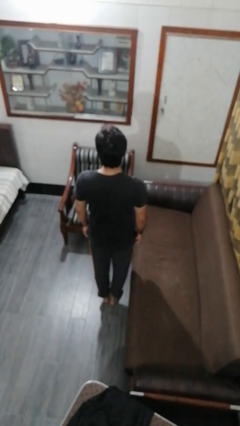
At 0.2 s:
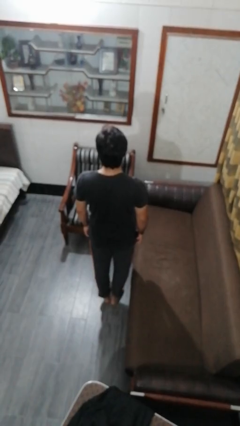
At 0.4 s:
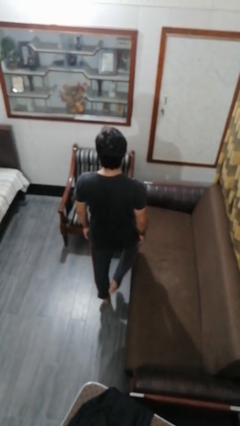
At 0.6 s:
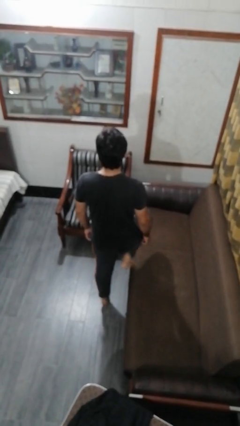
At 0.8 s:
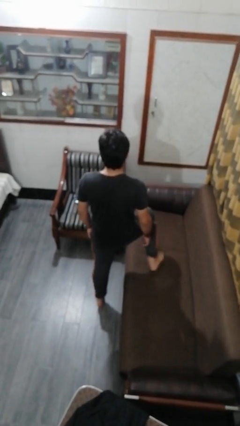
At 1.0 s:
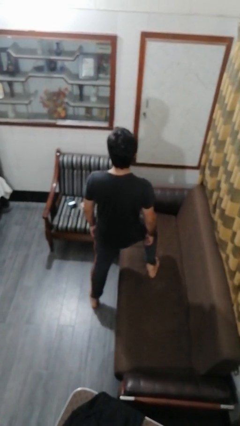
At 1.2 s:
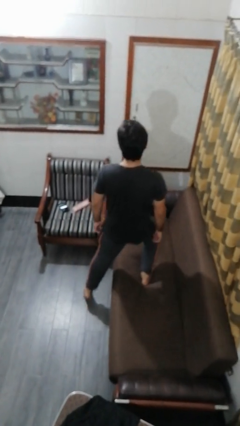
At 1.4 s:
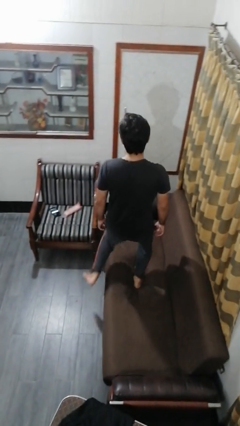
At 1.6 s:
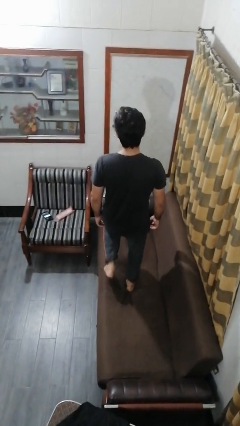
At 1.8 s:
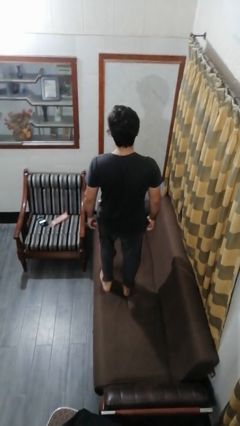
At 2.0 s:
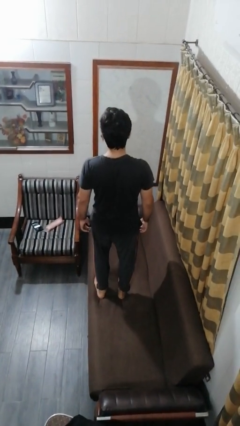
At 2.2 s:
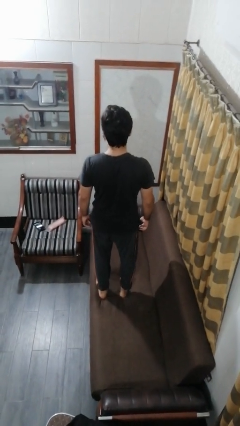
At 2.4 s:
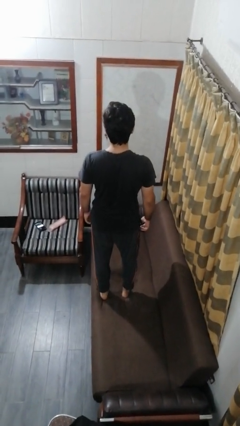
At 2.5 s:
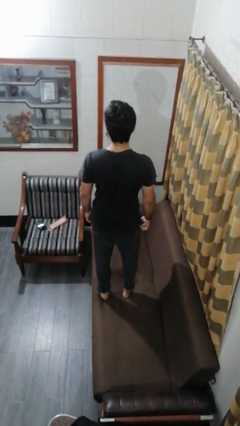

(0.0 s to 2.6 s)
person climbs on couch

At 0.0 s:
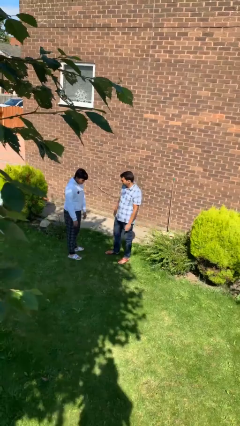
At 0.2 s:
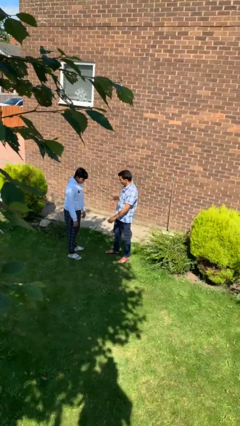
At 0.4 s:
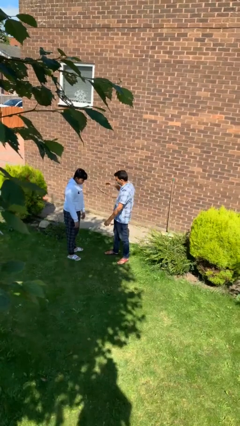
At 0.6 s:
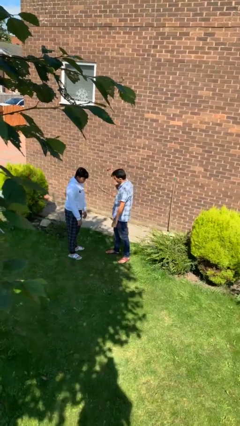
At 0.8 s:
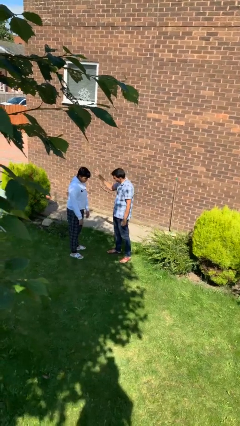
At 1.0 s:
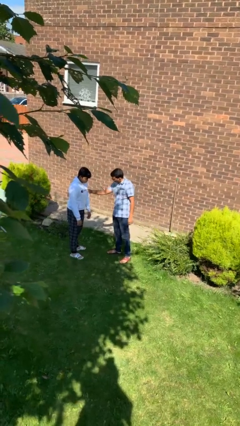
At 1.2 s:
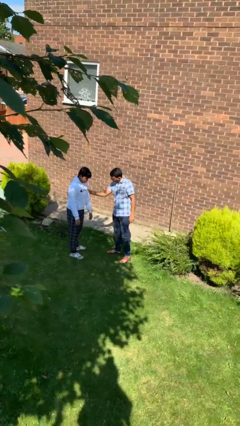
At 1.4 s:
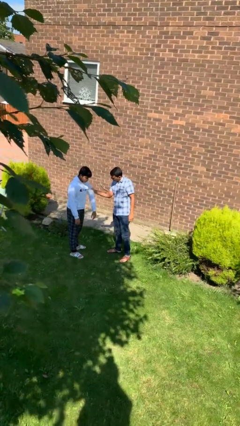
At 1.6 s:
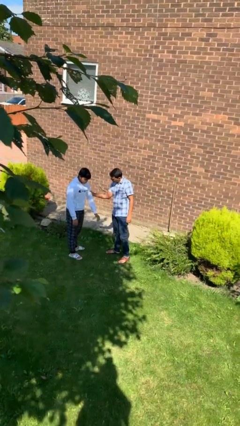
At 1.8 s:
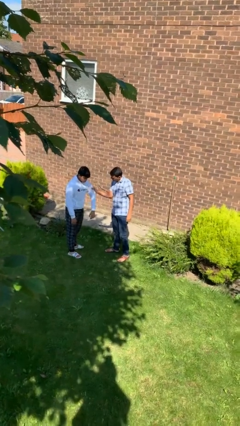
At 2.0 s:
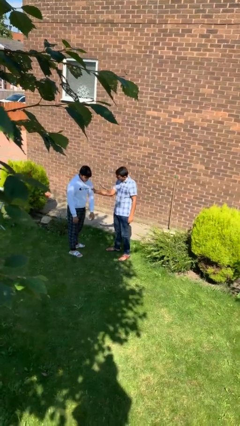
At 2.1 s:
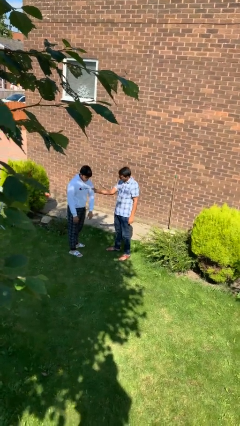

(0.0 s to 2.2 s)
person grabs person by bicep

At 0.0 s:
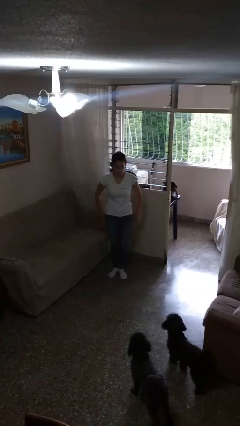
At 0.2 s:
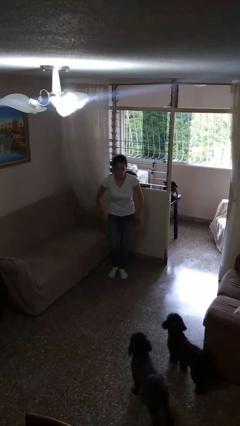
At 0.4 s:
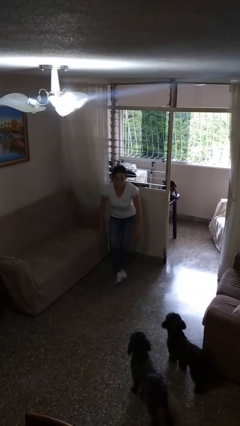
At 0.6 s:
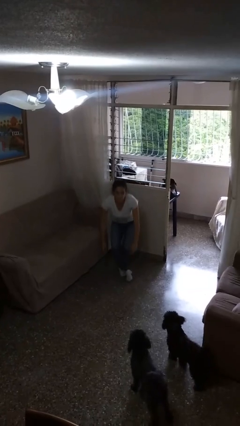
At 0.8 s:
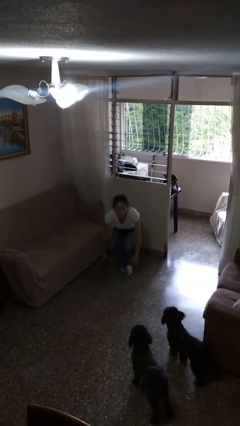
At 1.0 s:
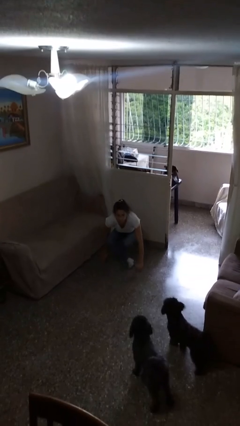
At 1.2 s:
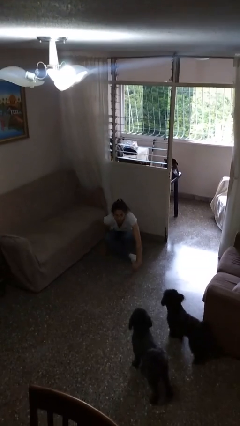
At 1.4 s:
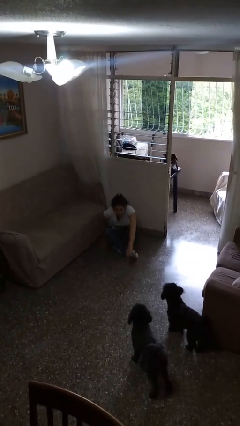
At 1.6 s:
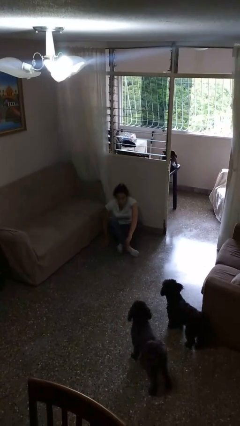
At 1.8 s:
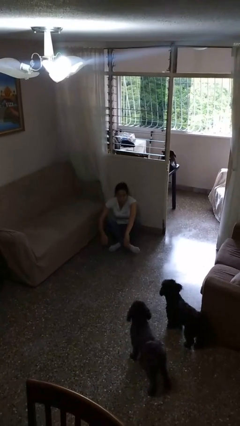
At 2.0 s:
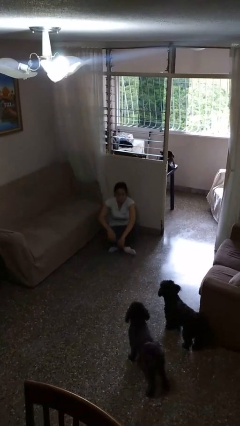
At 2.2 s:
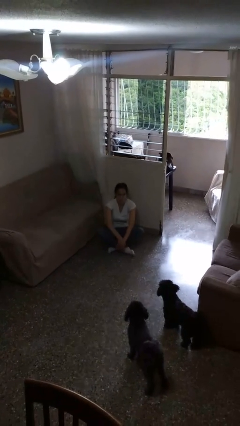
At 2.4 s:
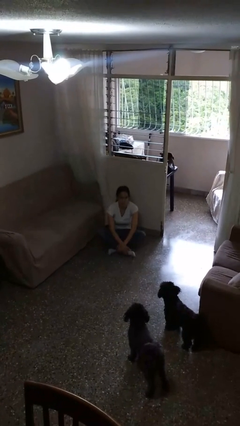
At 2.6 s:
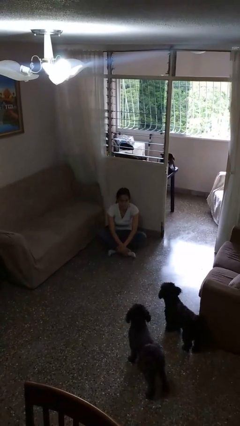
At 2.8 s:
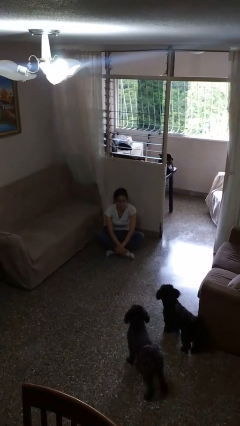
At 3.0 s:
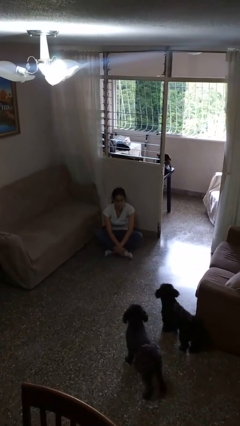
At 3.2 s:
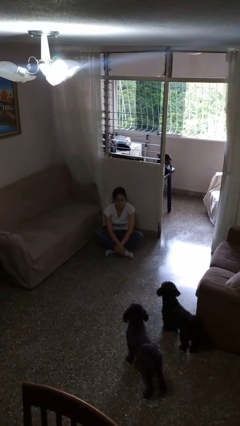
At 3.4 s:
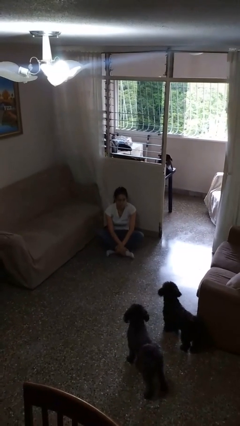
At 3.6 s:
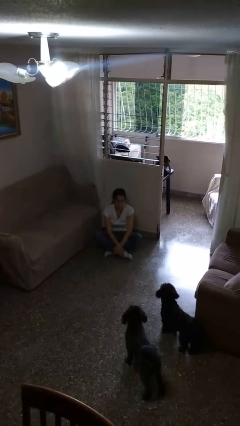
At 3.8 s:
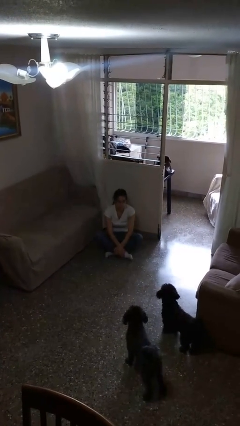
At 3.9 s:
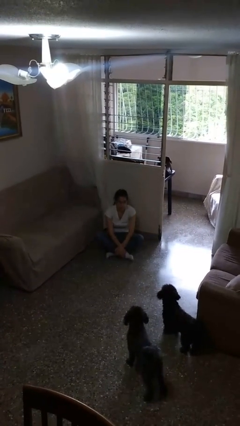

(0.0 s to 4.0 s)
person sits crisscross

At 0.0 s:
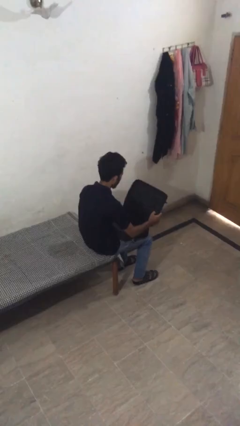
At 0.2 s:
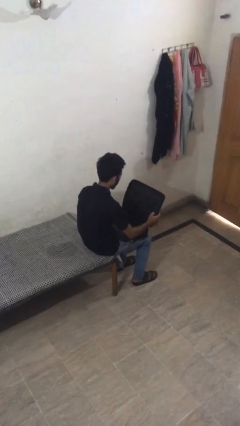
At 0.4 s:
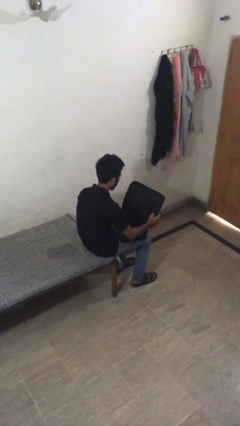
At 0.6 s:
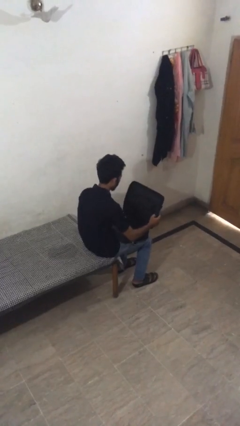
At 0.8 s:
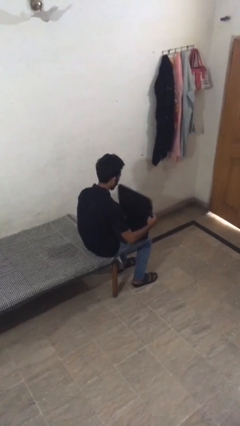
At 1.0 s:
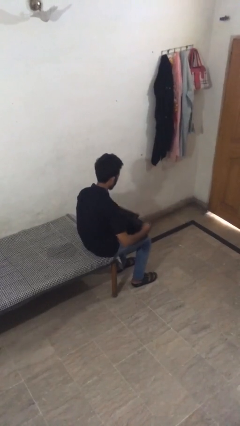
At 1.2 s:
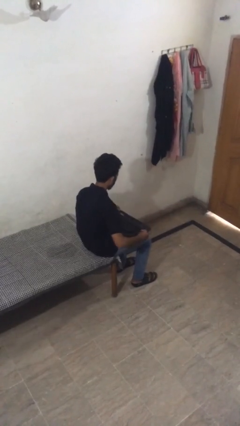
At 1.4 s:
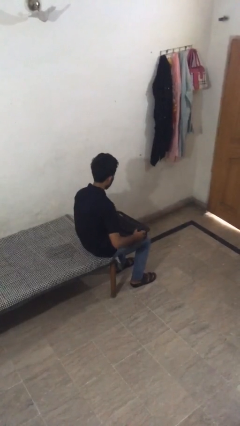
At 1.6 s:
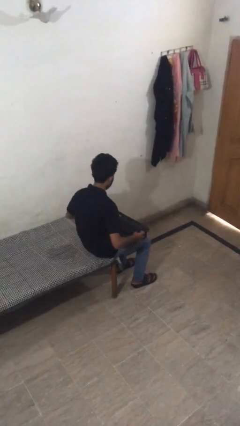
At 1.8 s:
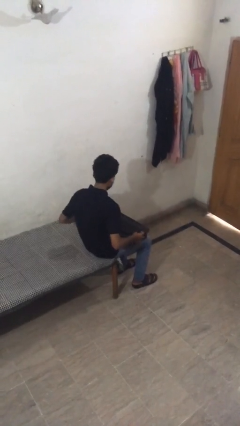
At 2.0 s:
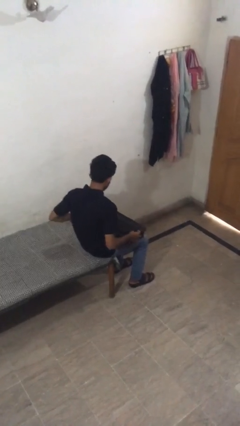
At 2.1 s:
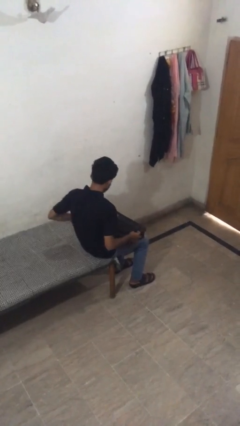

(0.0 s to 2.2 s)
person opens suitcase

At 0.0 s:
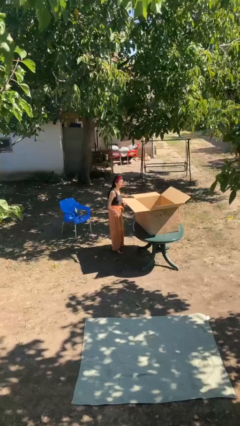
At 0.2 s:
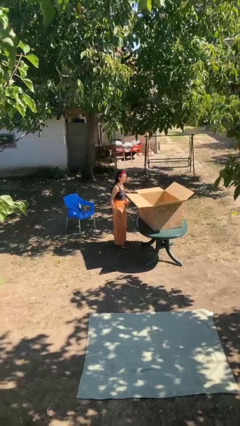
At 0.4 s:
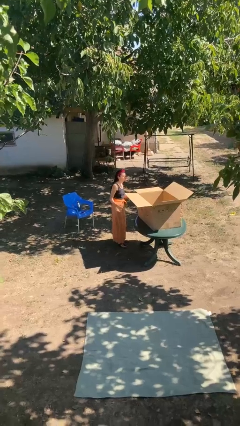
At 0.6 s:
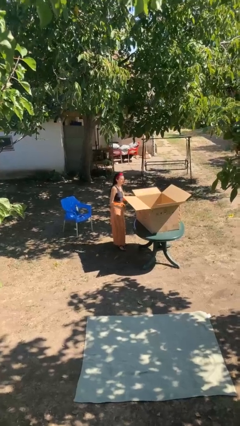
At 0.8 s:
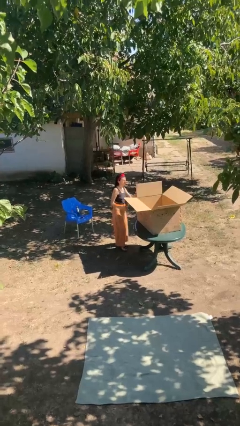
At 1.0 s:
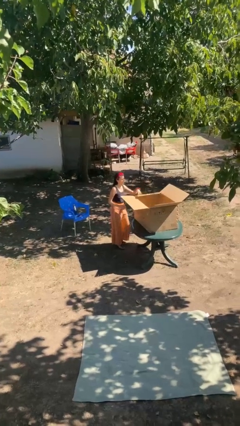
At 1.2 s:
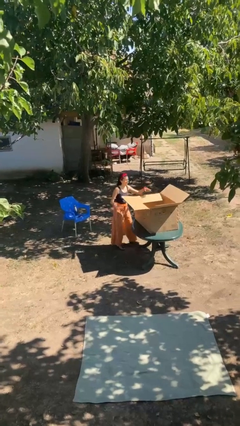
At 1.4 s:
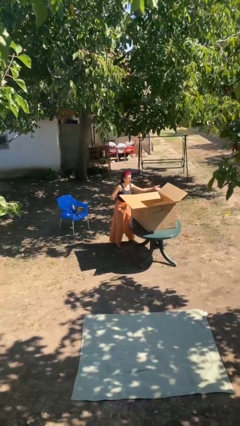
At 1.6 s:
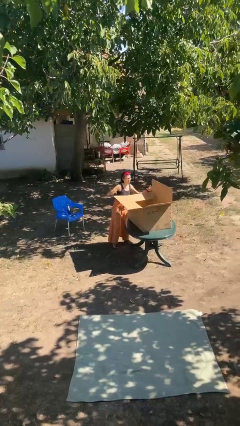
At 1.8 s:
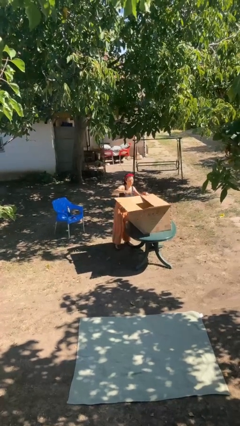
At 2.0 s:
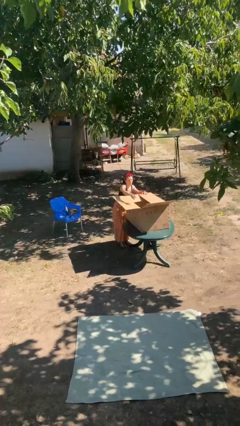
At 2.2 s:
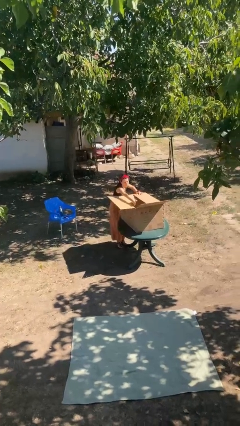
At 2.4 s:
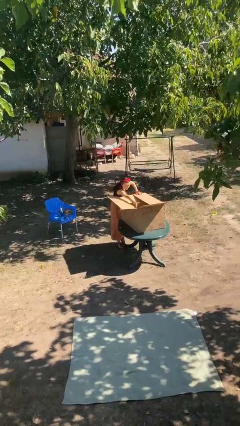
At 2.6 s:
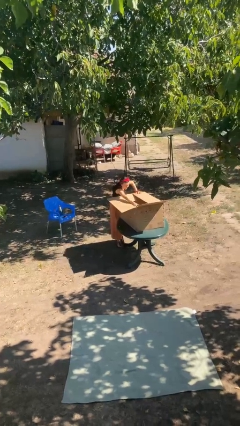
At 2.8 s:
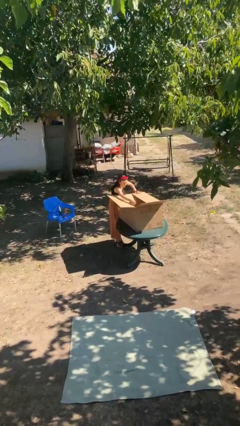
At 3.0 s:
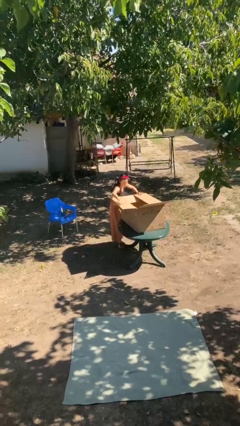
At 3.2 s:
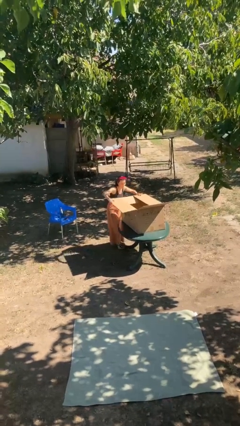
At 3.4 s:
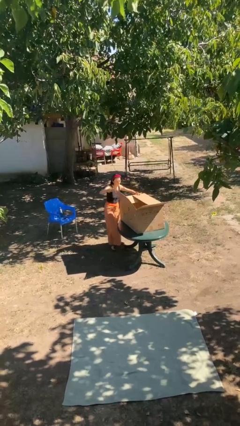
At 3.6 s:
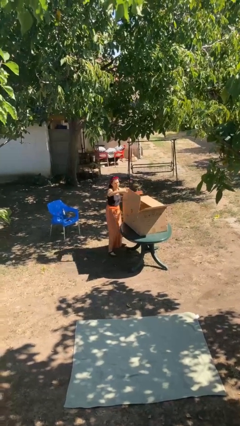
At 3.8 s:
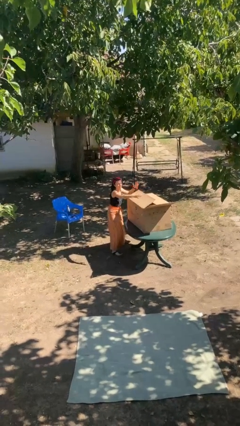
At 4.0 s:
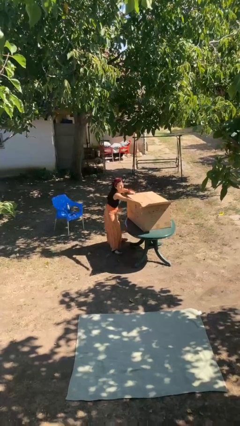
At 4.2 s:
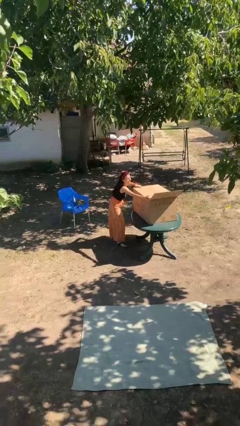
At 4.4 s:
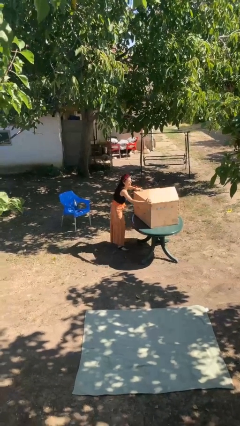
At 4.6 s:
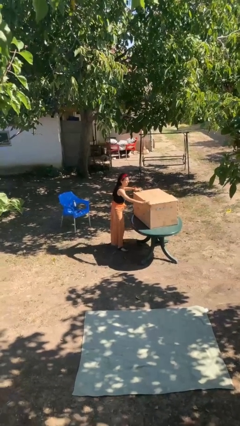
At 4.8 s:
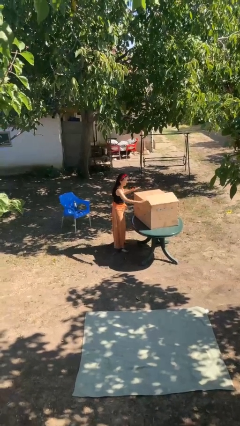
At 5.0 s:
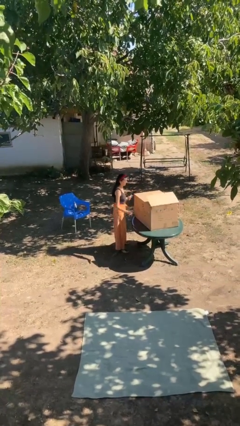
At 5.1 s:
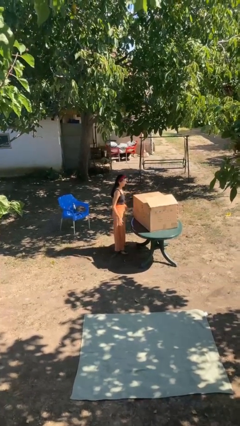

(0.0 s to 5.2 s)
person closes box

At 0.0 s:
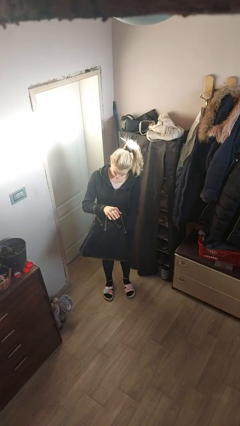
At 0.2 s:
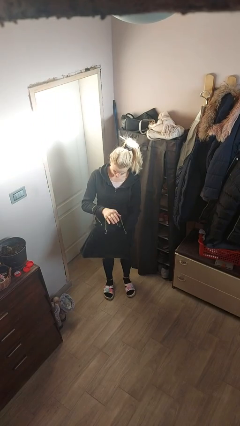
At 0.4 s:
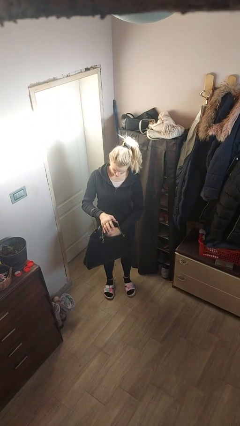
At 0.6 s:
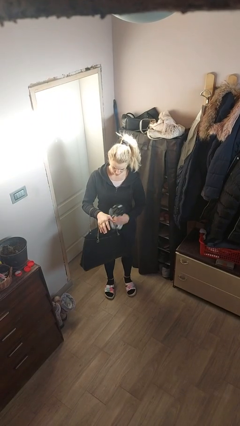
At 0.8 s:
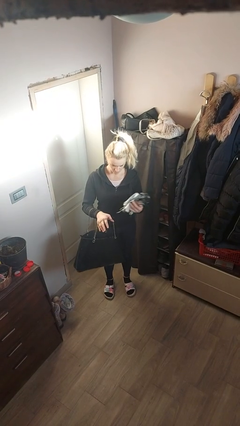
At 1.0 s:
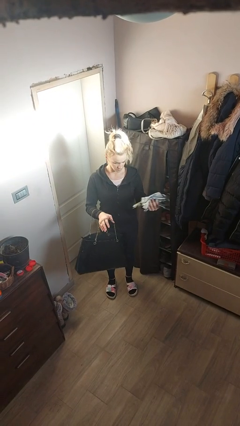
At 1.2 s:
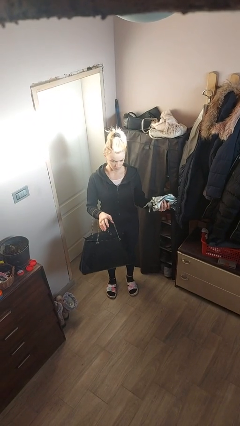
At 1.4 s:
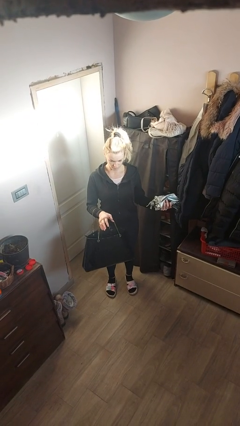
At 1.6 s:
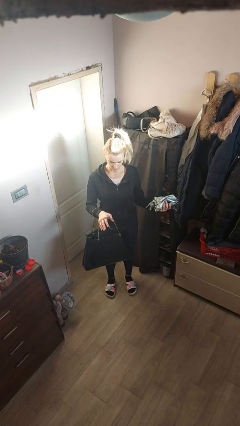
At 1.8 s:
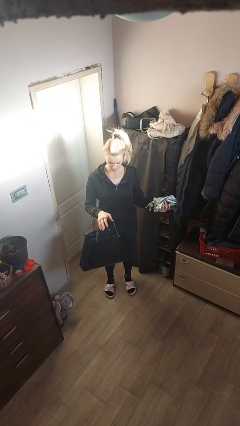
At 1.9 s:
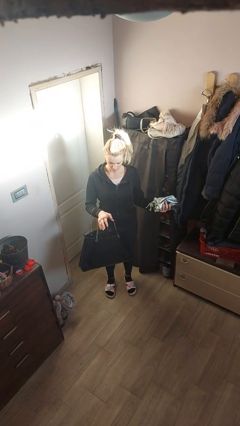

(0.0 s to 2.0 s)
person takes object from purse
